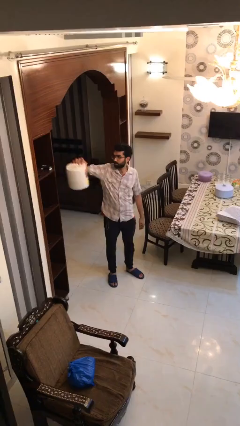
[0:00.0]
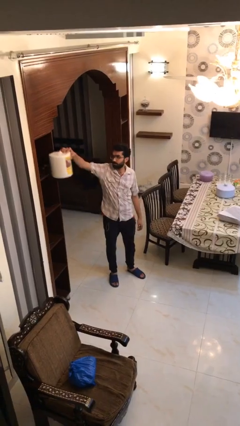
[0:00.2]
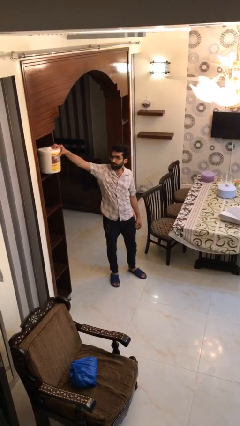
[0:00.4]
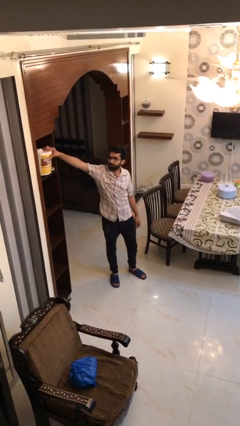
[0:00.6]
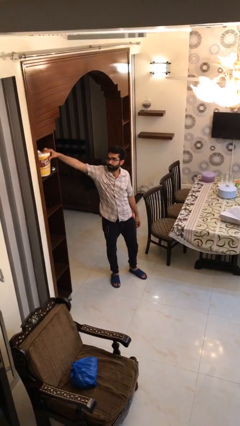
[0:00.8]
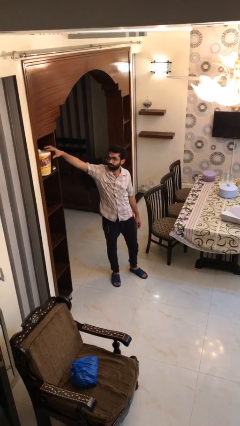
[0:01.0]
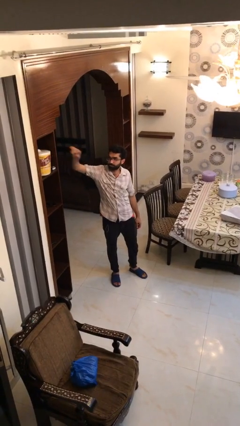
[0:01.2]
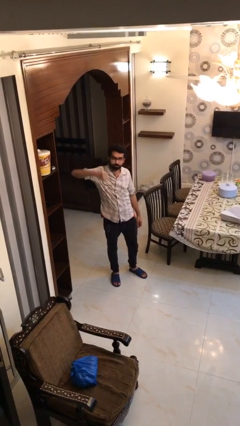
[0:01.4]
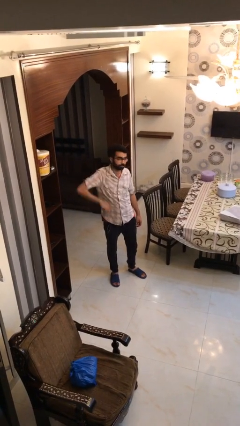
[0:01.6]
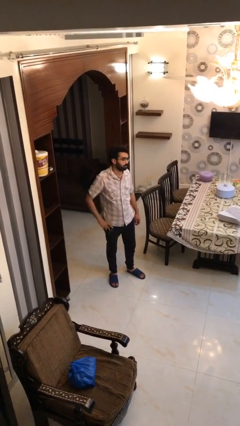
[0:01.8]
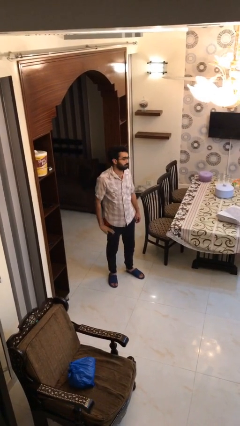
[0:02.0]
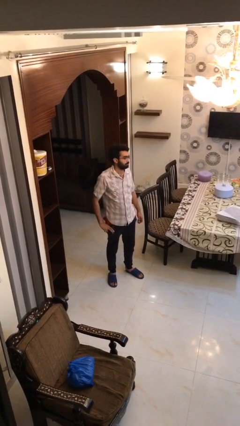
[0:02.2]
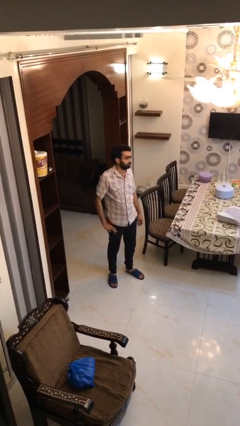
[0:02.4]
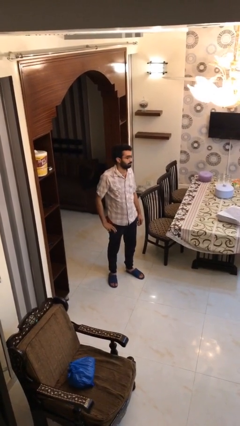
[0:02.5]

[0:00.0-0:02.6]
person puts down object on shelf

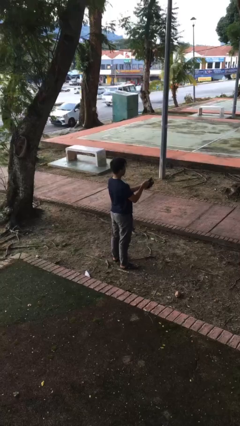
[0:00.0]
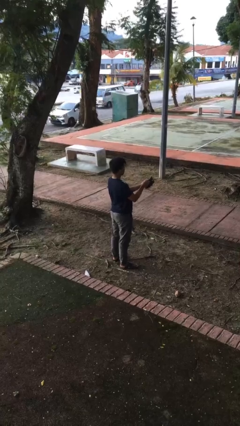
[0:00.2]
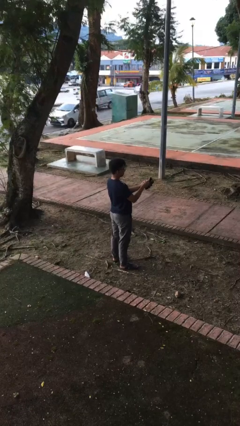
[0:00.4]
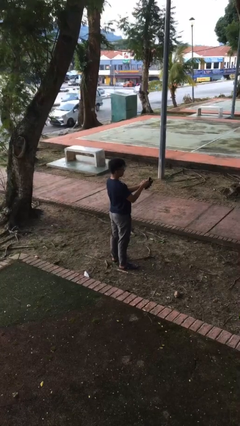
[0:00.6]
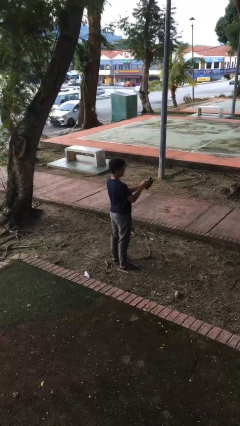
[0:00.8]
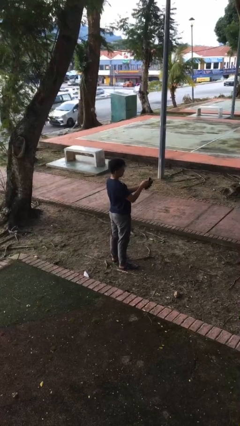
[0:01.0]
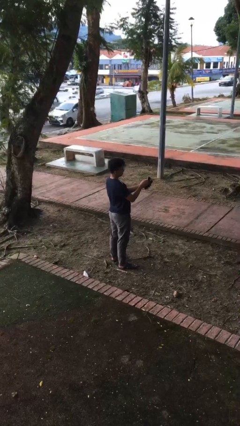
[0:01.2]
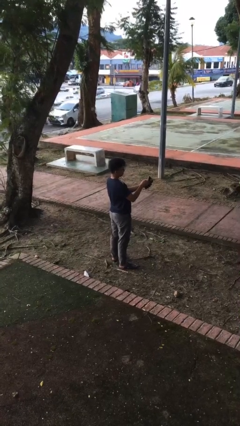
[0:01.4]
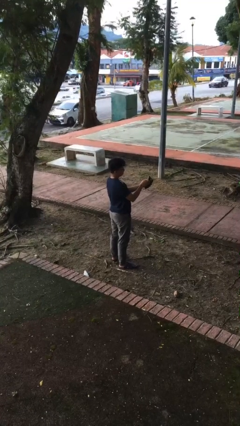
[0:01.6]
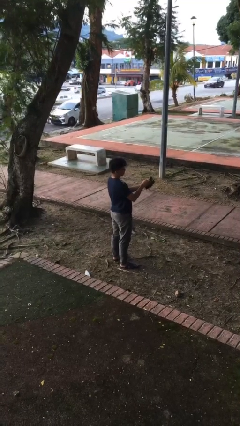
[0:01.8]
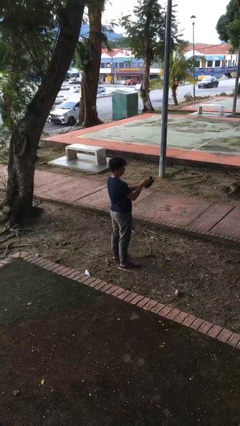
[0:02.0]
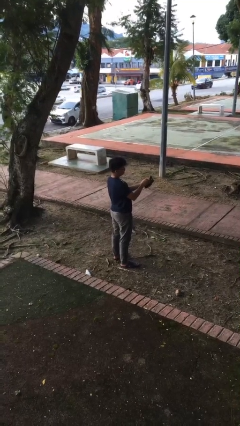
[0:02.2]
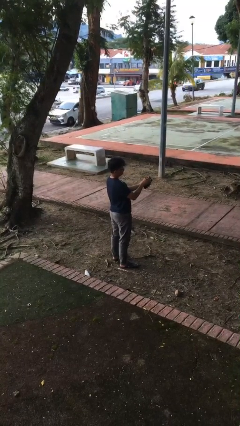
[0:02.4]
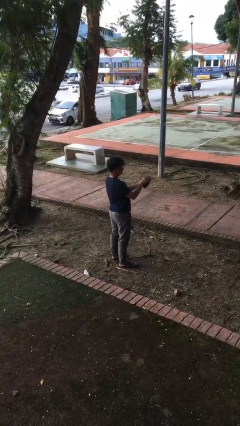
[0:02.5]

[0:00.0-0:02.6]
person searches in purse

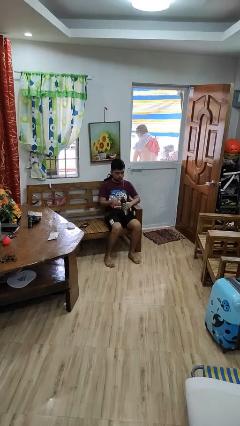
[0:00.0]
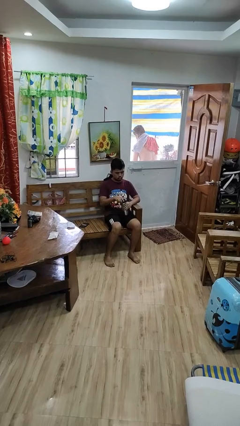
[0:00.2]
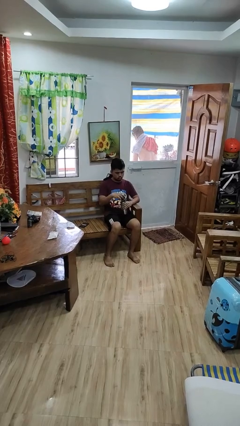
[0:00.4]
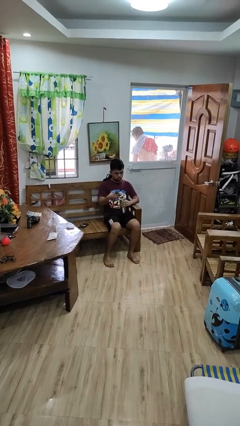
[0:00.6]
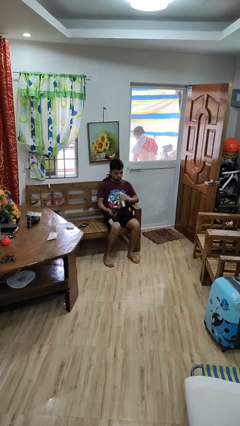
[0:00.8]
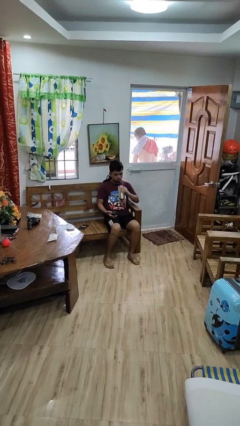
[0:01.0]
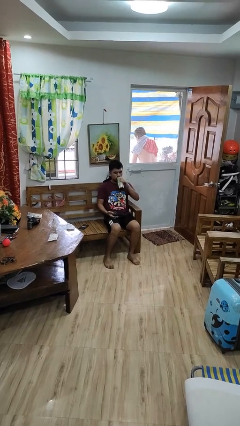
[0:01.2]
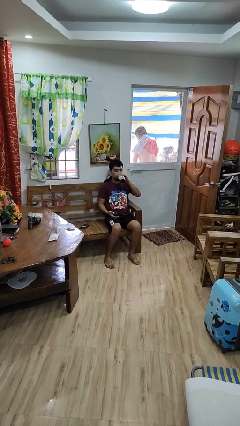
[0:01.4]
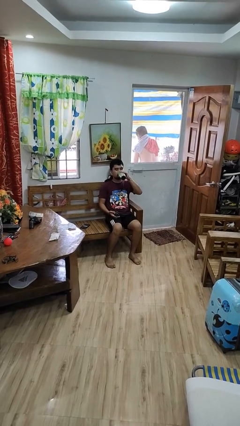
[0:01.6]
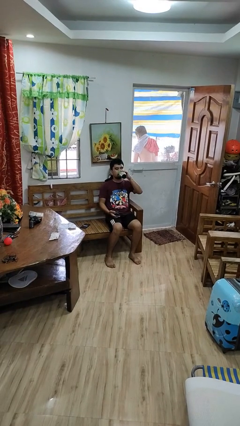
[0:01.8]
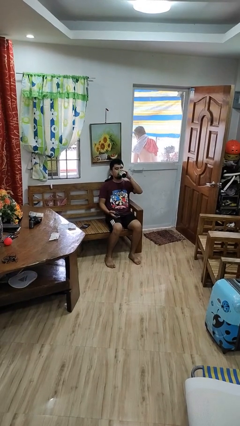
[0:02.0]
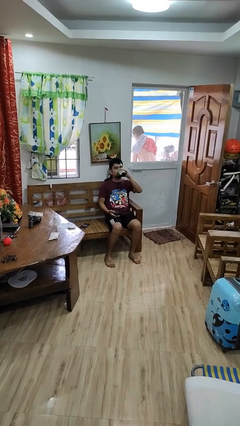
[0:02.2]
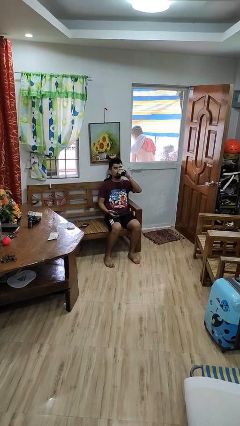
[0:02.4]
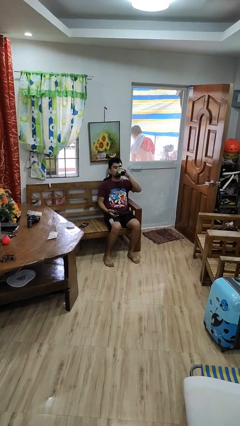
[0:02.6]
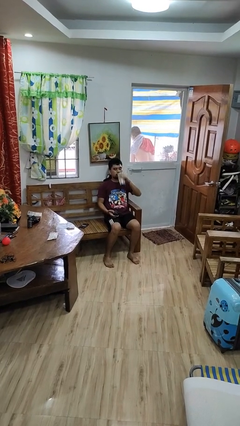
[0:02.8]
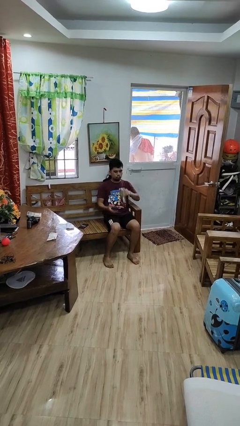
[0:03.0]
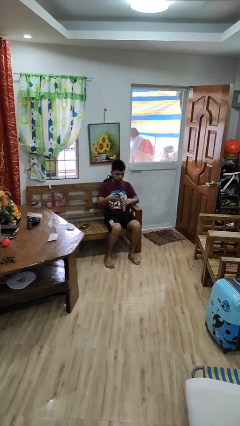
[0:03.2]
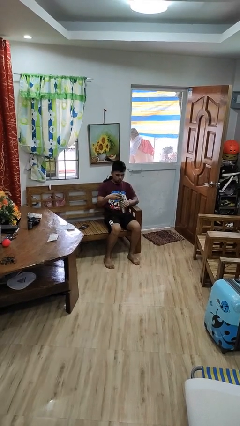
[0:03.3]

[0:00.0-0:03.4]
person drinks from bottle

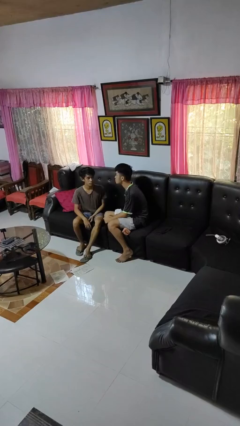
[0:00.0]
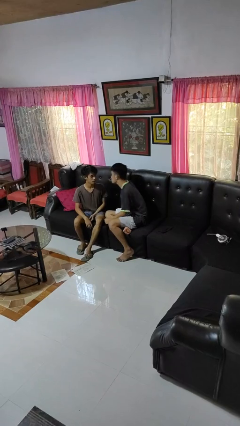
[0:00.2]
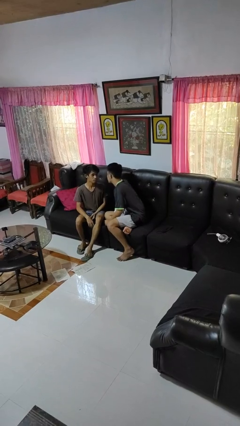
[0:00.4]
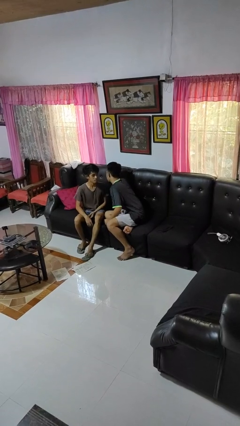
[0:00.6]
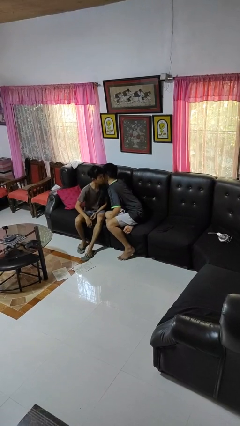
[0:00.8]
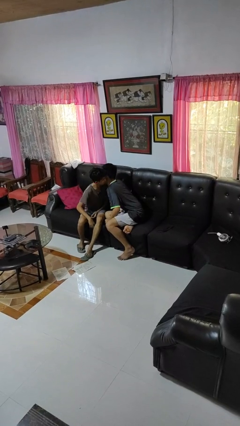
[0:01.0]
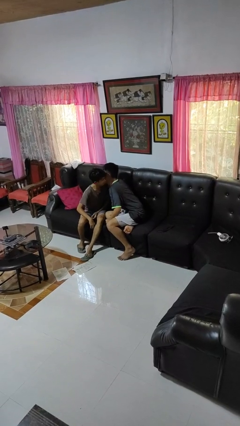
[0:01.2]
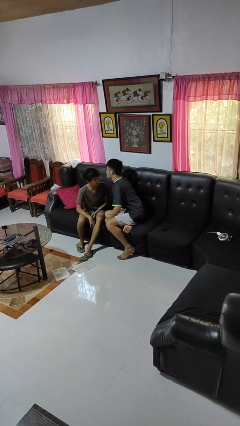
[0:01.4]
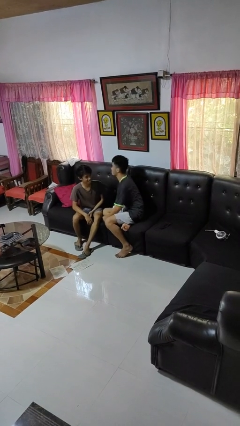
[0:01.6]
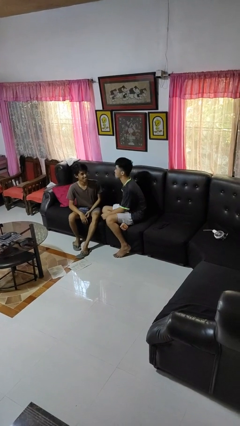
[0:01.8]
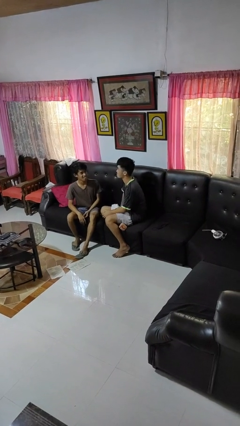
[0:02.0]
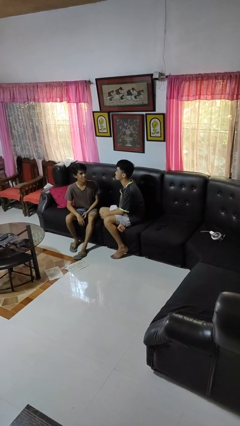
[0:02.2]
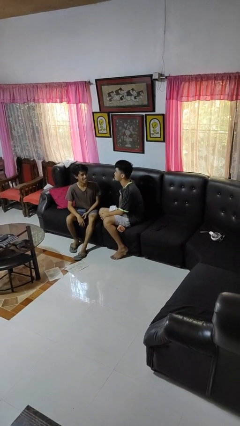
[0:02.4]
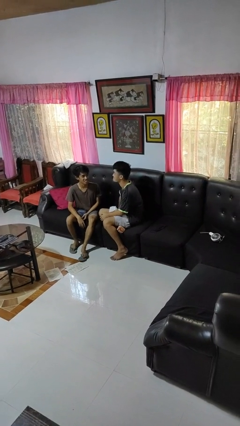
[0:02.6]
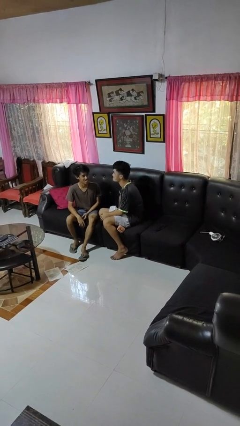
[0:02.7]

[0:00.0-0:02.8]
person kisses cheek of person

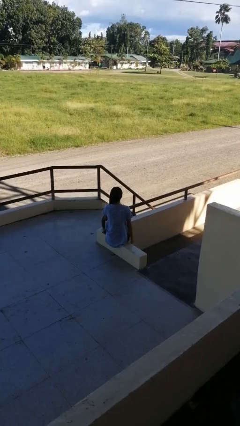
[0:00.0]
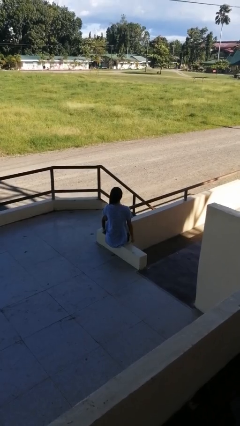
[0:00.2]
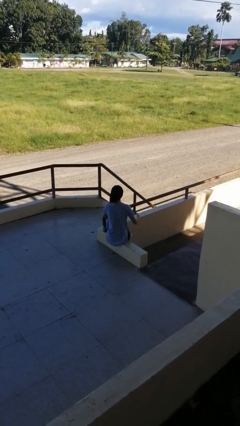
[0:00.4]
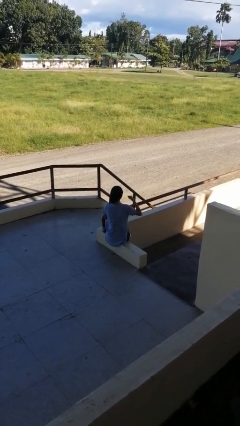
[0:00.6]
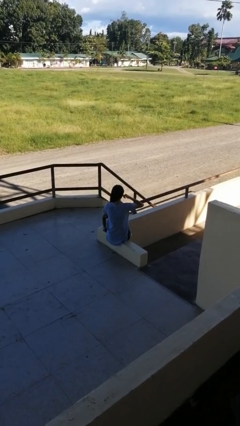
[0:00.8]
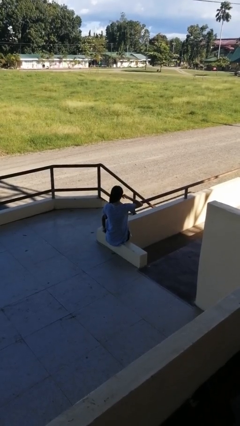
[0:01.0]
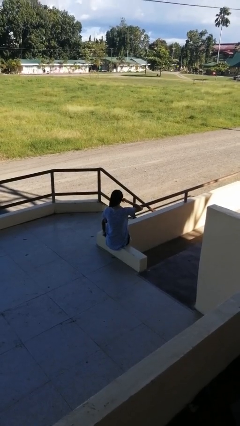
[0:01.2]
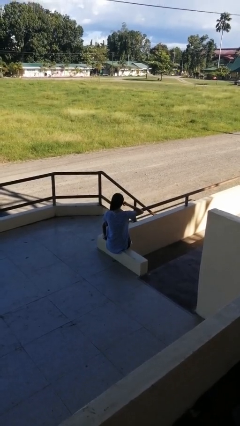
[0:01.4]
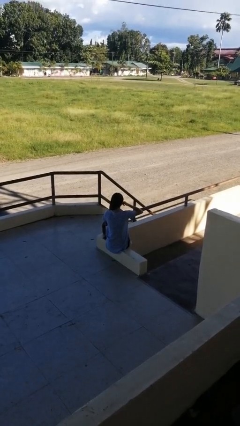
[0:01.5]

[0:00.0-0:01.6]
person gestures call me

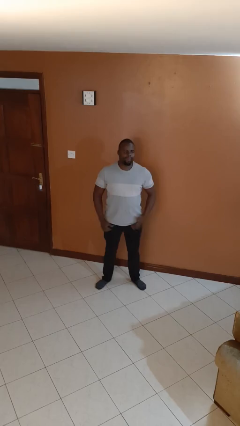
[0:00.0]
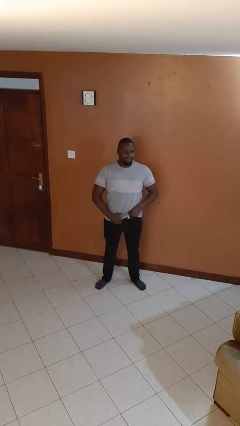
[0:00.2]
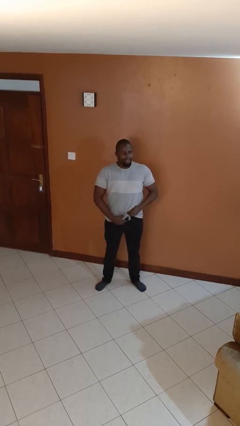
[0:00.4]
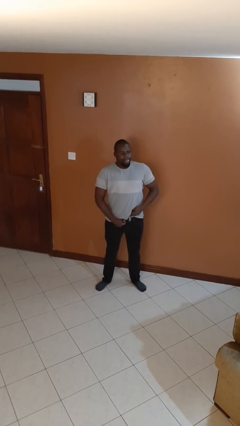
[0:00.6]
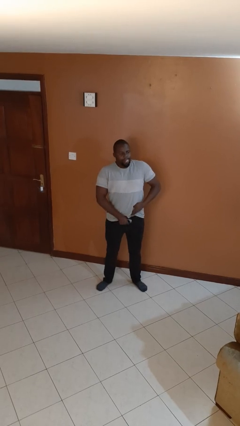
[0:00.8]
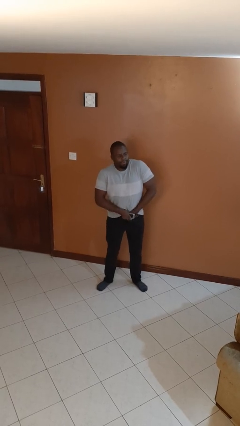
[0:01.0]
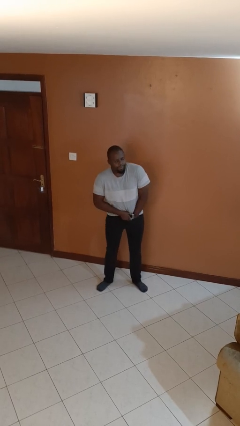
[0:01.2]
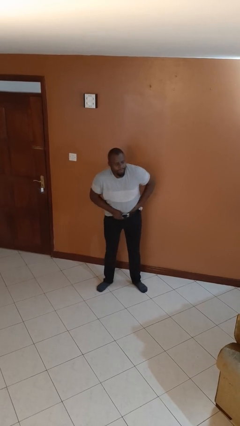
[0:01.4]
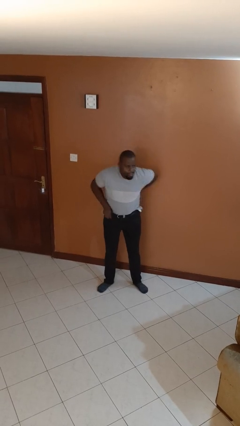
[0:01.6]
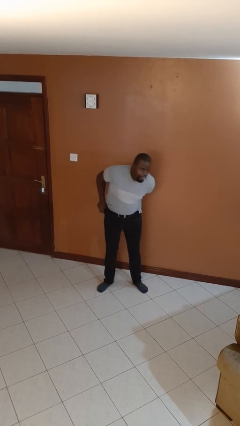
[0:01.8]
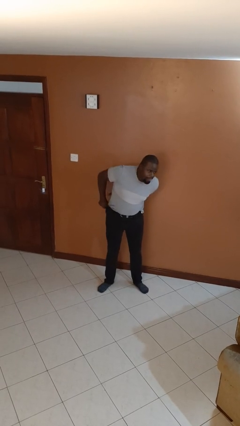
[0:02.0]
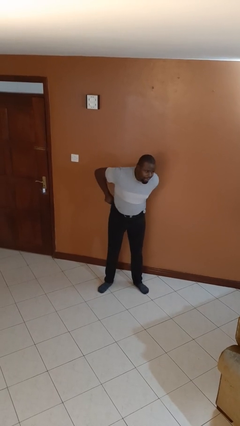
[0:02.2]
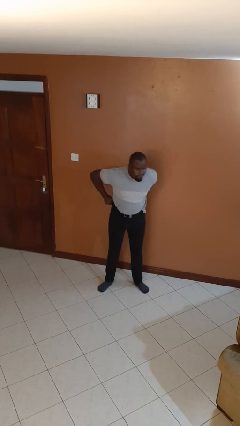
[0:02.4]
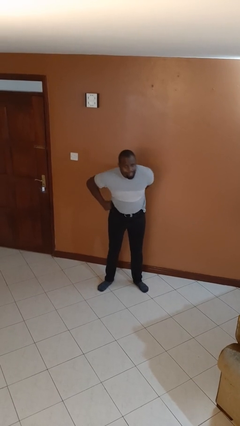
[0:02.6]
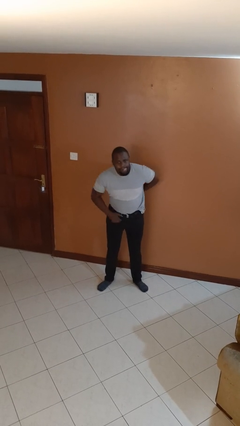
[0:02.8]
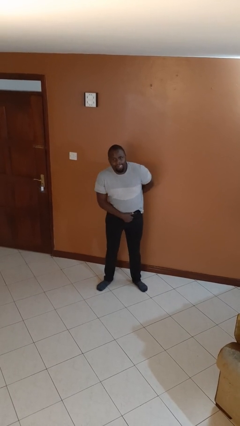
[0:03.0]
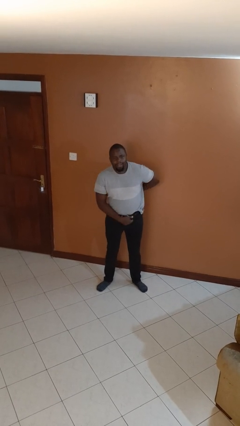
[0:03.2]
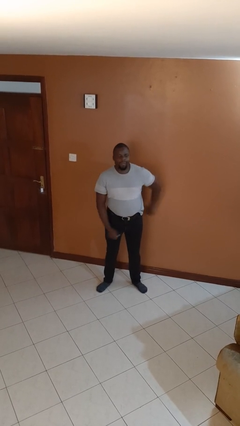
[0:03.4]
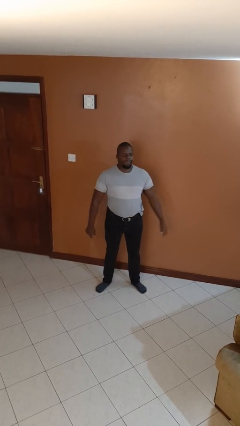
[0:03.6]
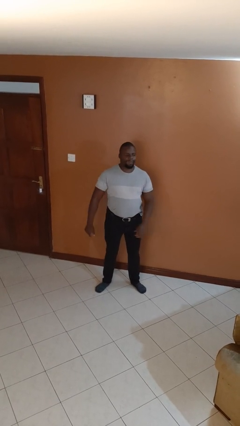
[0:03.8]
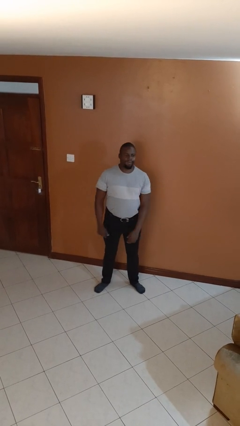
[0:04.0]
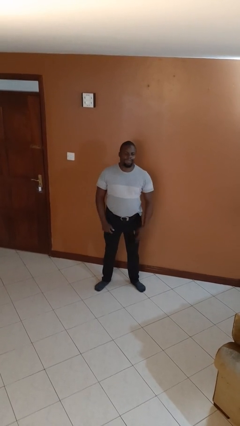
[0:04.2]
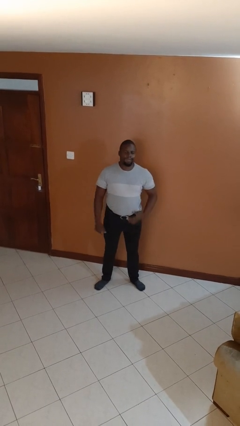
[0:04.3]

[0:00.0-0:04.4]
person tucks in shirt
